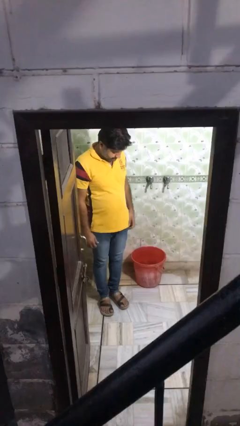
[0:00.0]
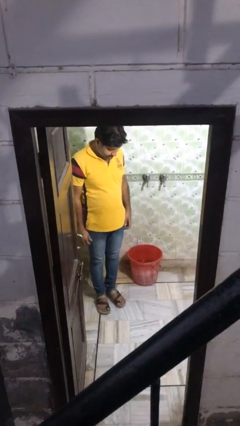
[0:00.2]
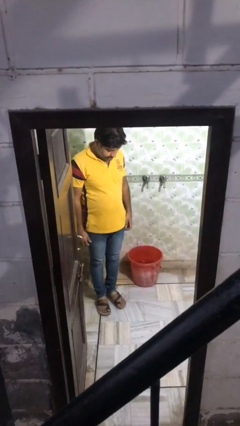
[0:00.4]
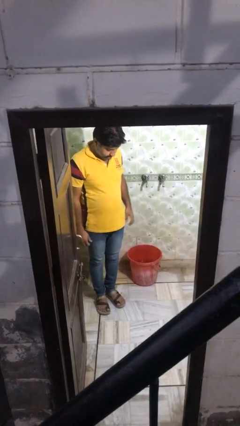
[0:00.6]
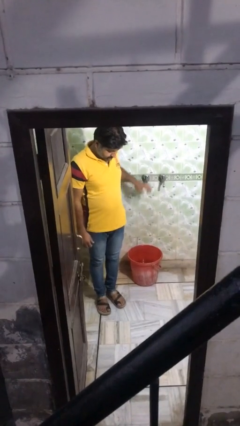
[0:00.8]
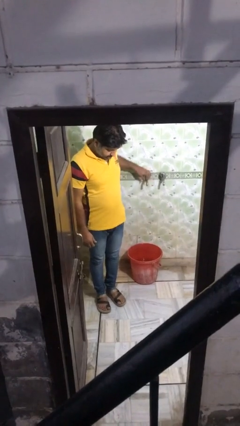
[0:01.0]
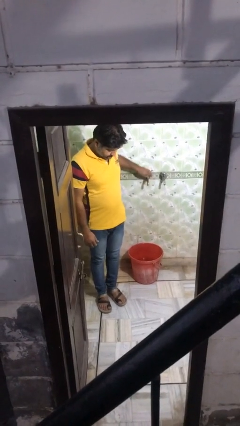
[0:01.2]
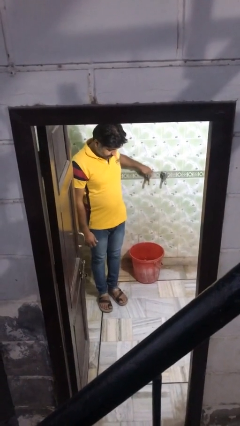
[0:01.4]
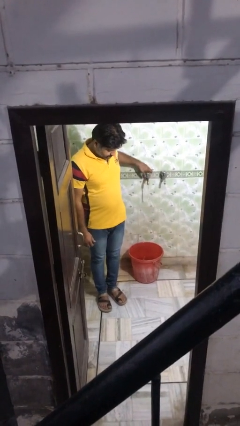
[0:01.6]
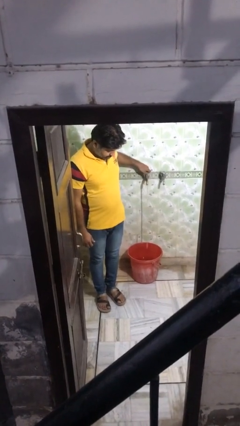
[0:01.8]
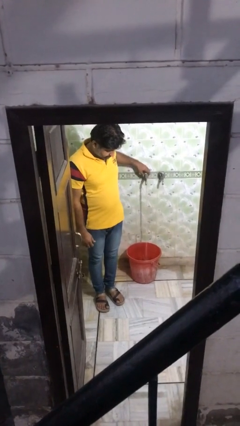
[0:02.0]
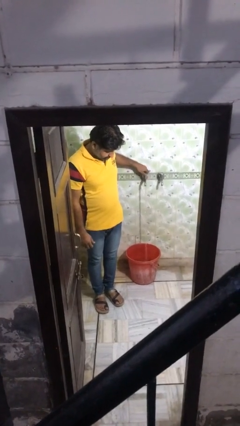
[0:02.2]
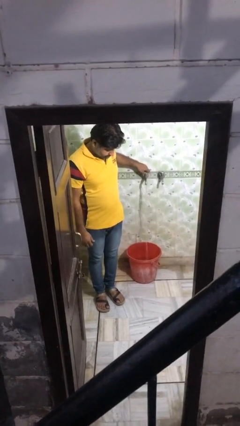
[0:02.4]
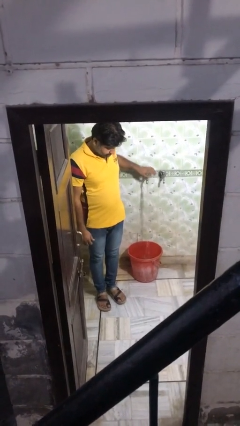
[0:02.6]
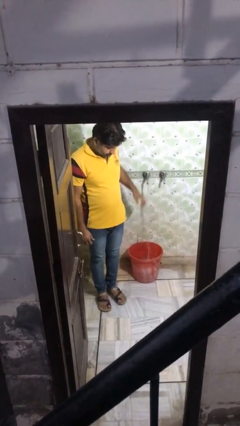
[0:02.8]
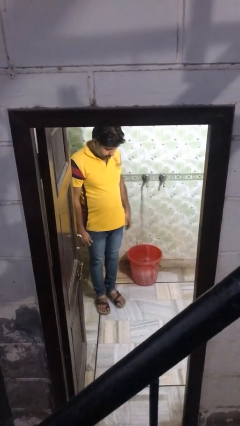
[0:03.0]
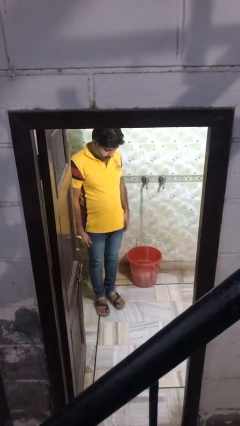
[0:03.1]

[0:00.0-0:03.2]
person turns on faucet

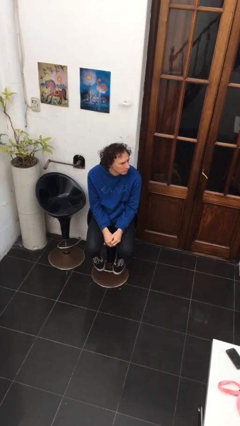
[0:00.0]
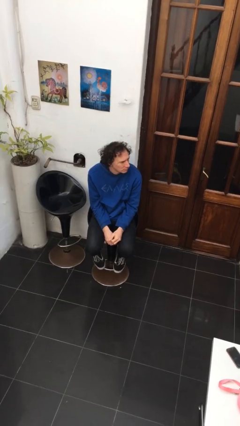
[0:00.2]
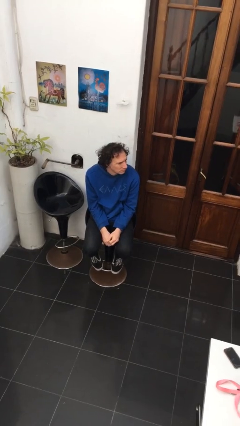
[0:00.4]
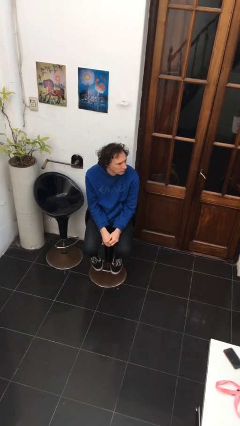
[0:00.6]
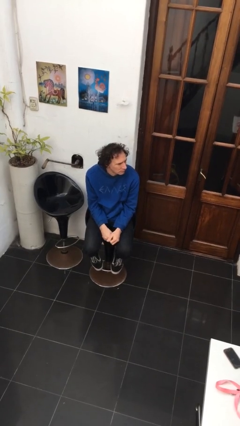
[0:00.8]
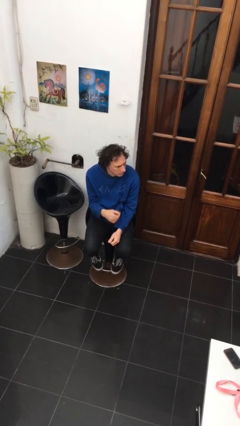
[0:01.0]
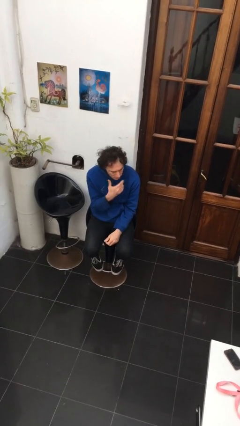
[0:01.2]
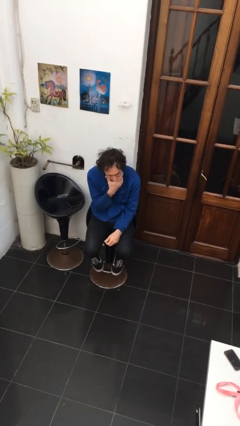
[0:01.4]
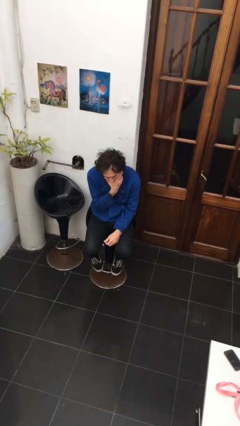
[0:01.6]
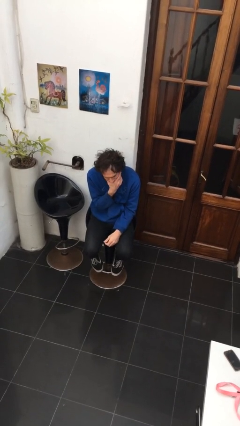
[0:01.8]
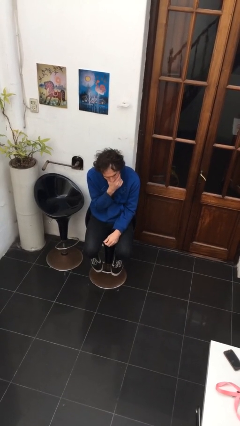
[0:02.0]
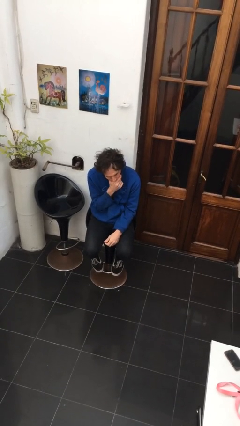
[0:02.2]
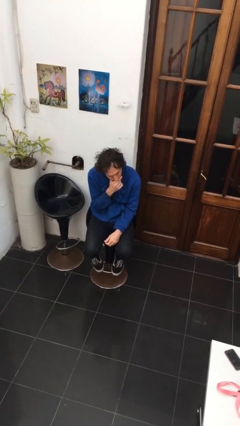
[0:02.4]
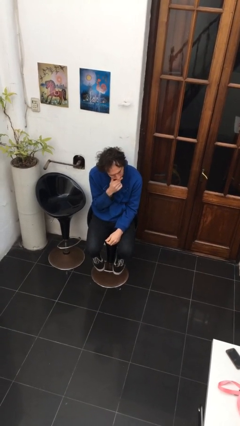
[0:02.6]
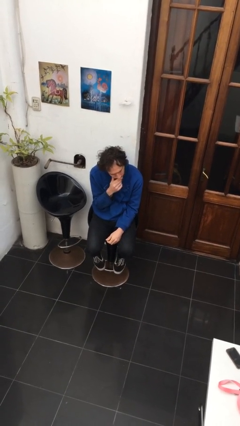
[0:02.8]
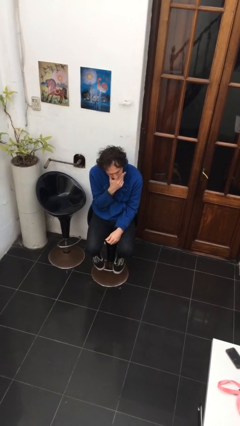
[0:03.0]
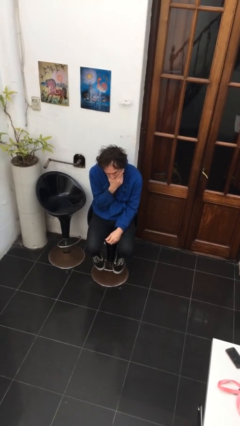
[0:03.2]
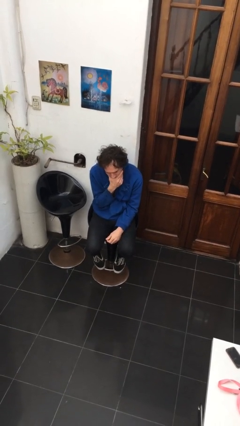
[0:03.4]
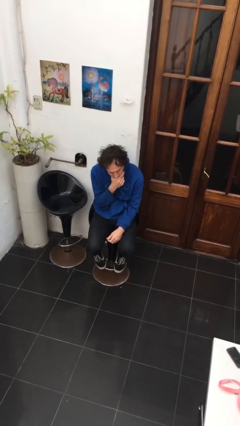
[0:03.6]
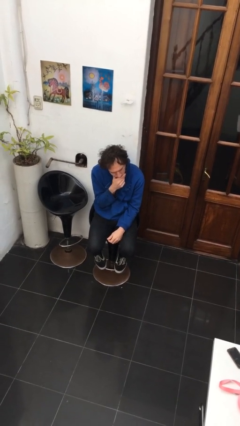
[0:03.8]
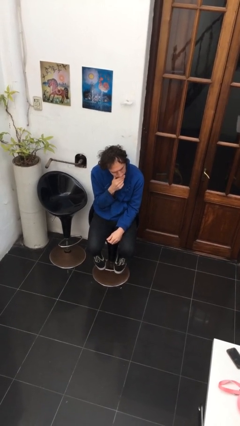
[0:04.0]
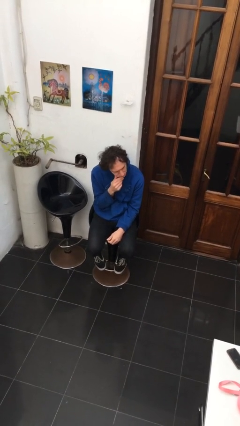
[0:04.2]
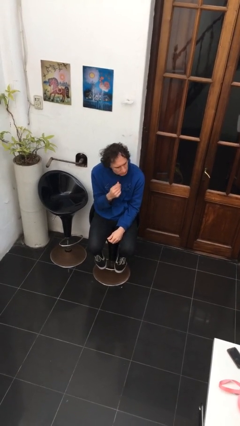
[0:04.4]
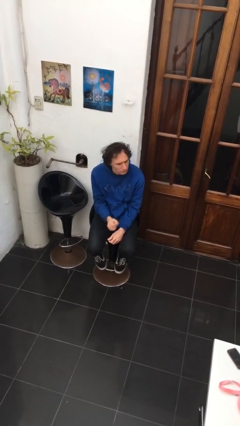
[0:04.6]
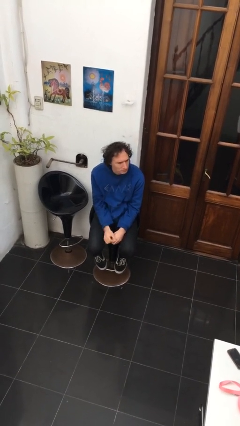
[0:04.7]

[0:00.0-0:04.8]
person strokes chin

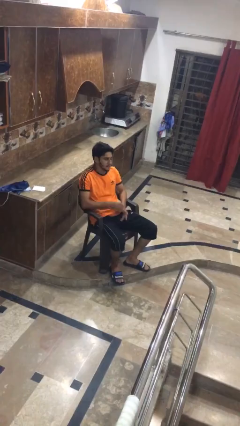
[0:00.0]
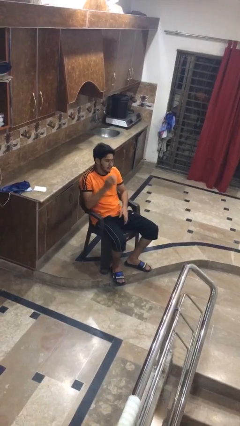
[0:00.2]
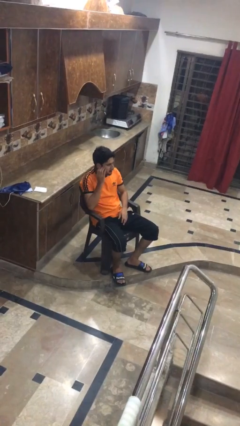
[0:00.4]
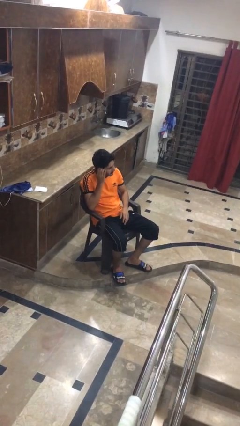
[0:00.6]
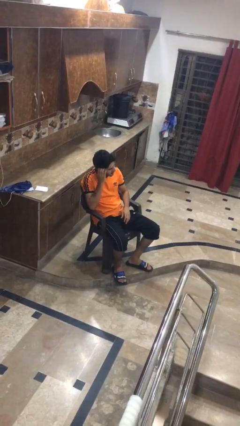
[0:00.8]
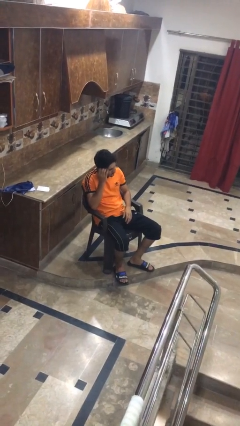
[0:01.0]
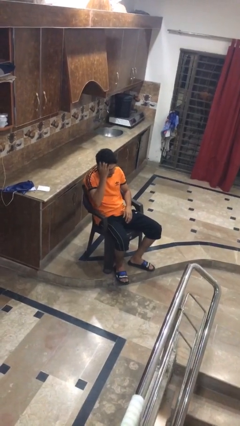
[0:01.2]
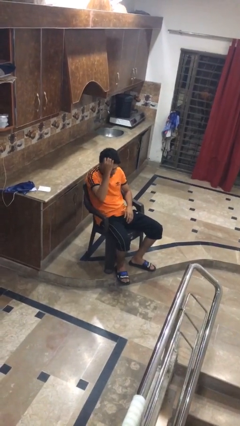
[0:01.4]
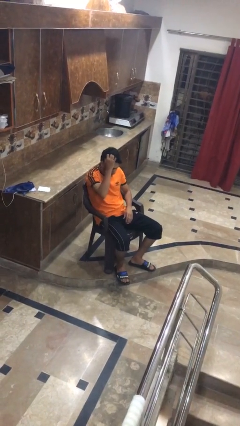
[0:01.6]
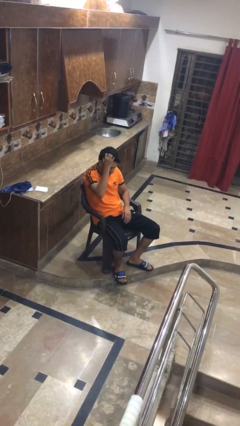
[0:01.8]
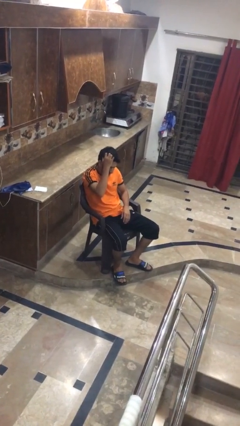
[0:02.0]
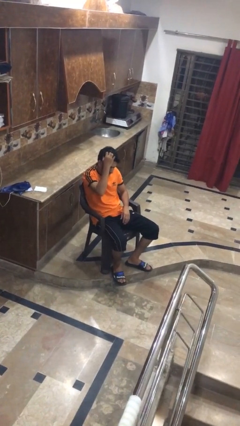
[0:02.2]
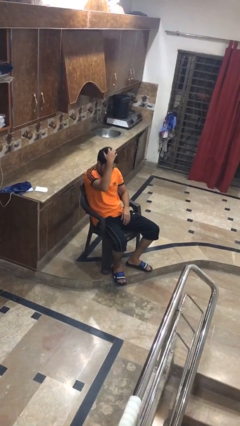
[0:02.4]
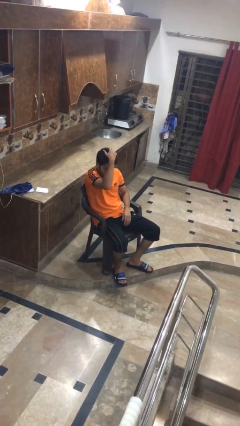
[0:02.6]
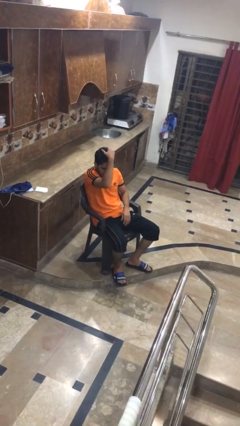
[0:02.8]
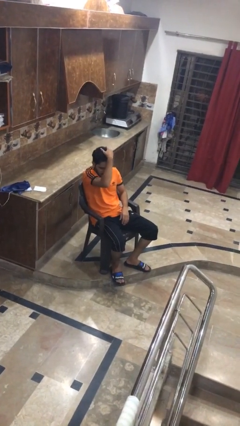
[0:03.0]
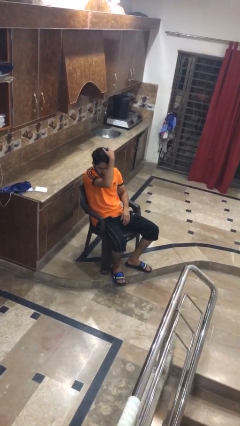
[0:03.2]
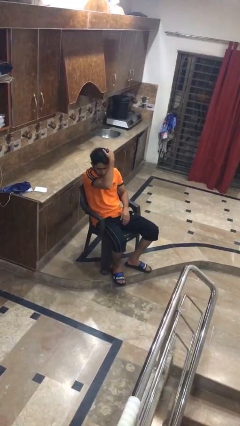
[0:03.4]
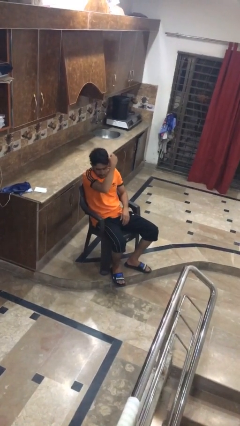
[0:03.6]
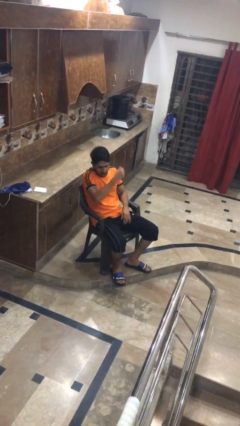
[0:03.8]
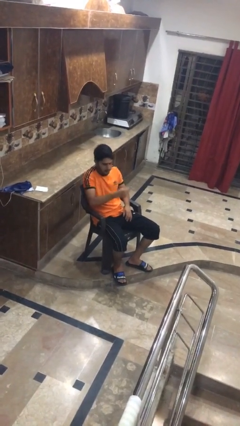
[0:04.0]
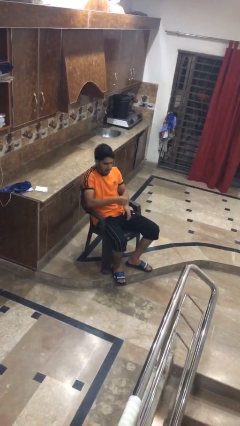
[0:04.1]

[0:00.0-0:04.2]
person scratches face

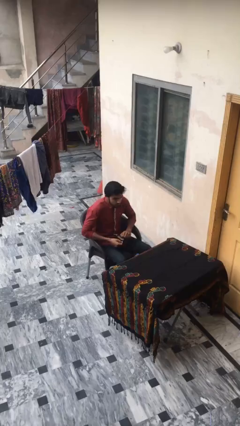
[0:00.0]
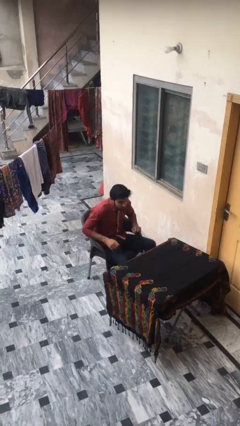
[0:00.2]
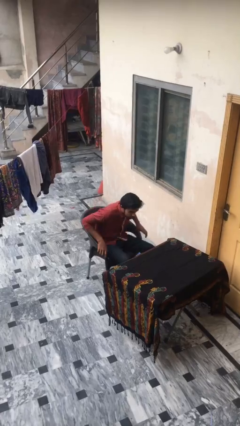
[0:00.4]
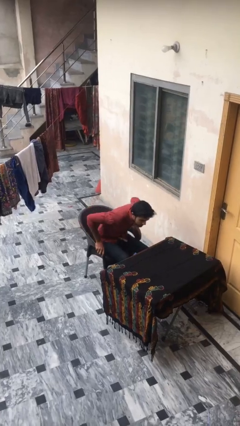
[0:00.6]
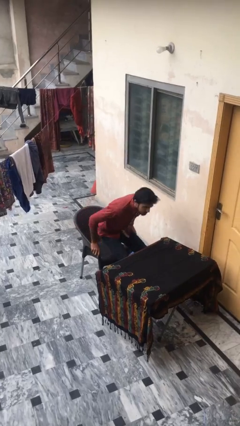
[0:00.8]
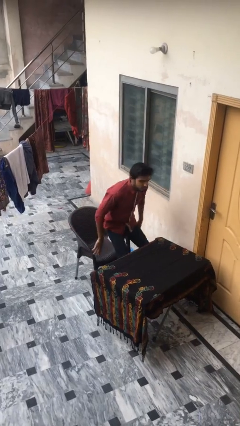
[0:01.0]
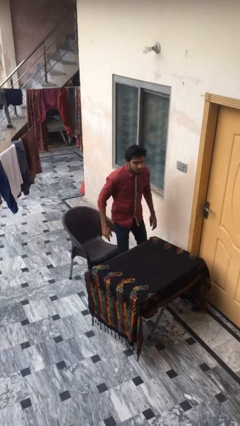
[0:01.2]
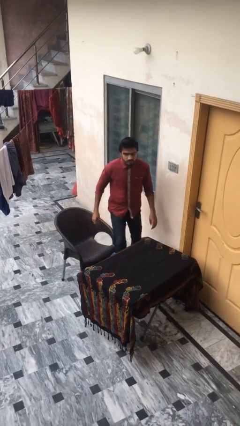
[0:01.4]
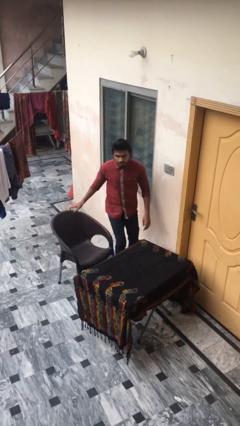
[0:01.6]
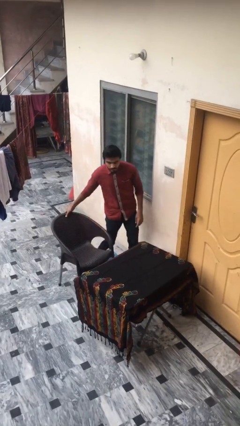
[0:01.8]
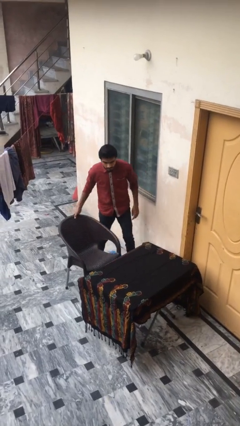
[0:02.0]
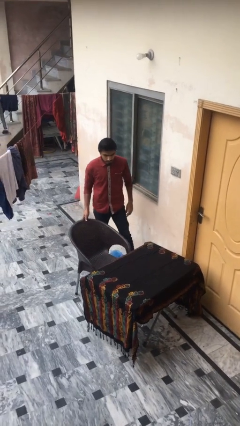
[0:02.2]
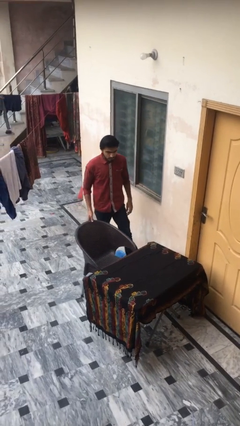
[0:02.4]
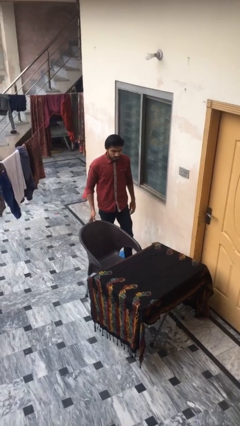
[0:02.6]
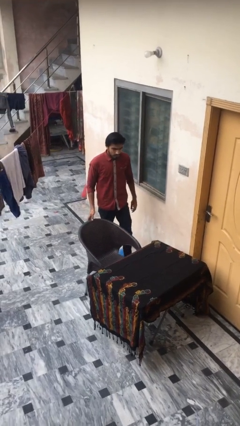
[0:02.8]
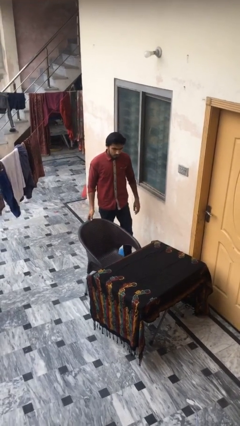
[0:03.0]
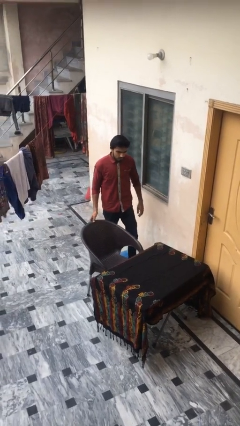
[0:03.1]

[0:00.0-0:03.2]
person stands up

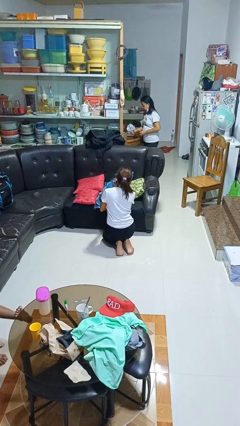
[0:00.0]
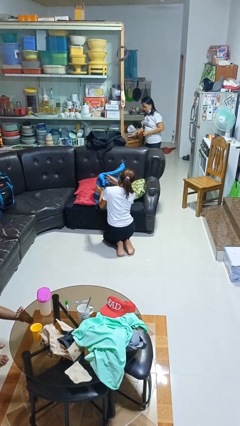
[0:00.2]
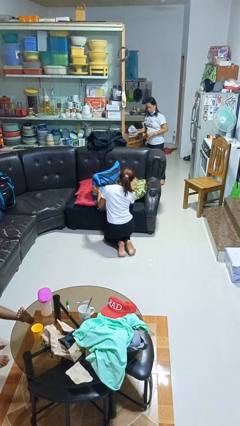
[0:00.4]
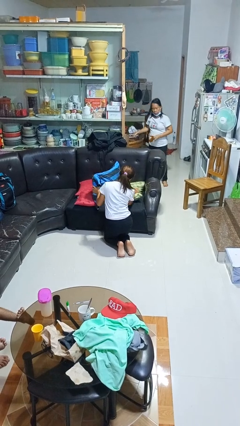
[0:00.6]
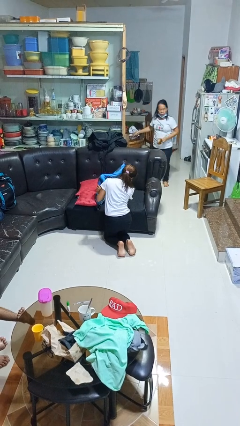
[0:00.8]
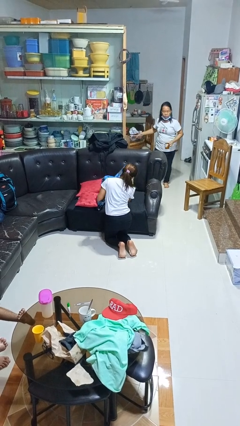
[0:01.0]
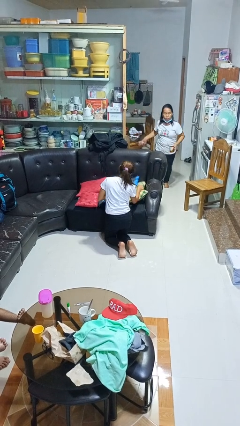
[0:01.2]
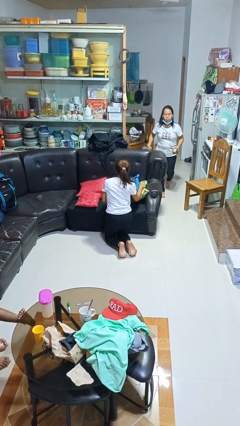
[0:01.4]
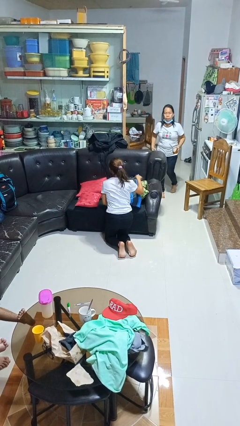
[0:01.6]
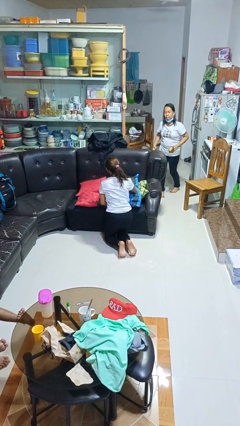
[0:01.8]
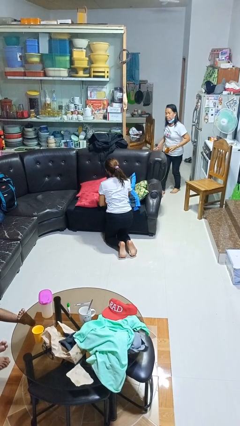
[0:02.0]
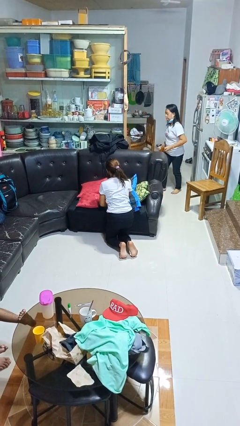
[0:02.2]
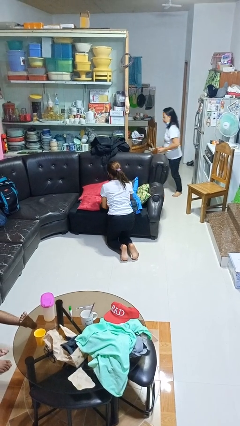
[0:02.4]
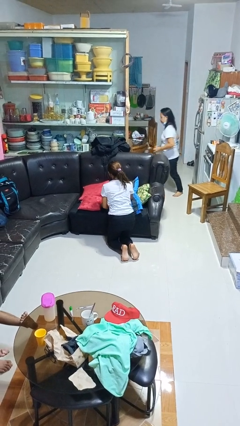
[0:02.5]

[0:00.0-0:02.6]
person searches in couch
